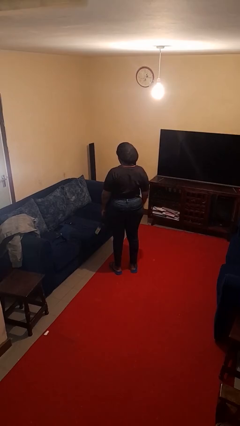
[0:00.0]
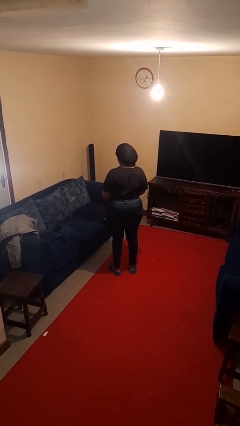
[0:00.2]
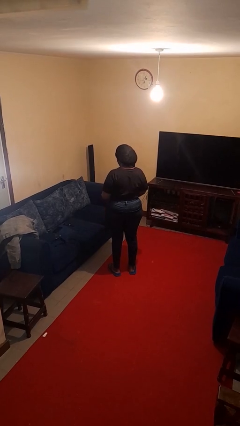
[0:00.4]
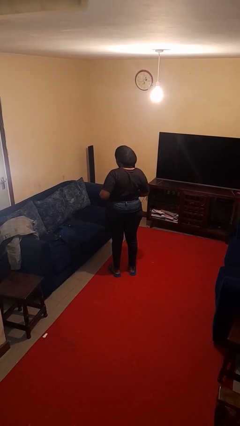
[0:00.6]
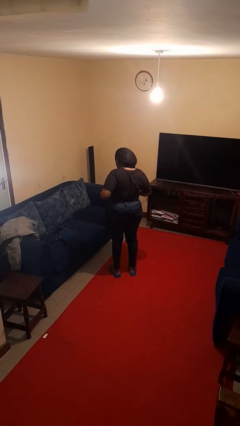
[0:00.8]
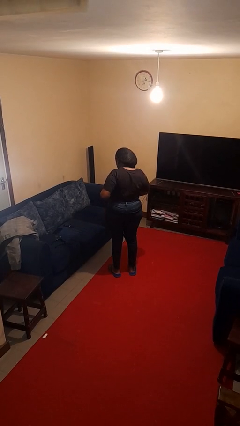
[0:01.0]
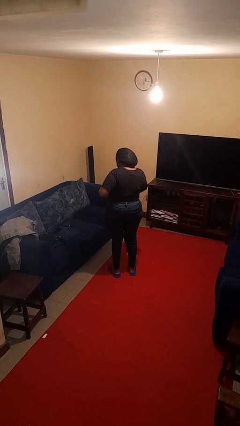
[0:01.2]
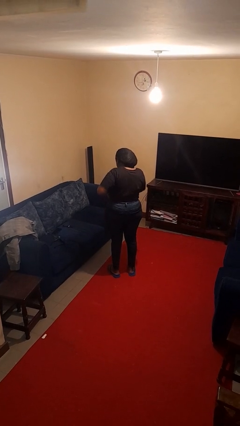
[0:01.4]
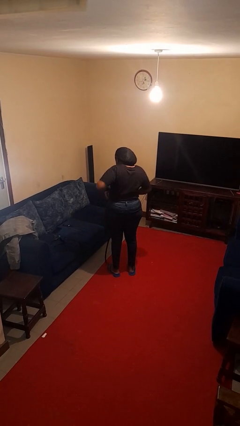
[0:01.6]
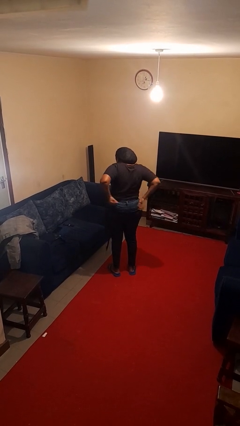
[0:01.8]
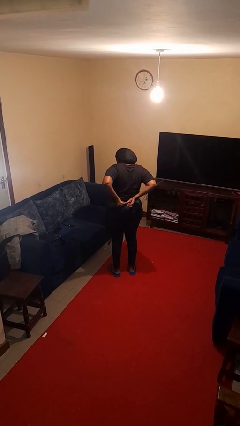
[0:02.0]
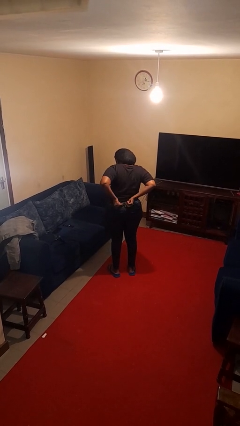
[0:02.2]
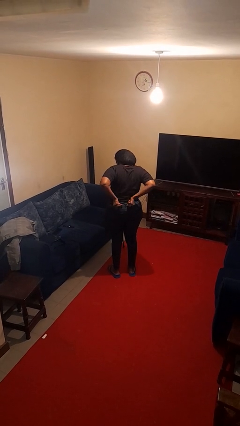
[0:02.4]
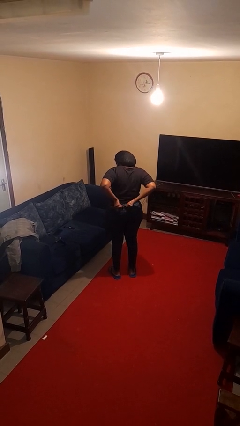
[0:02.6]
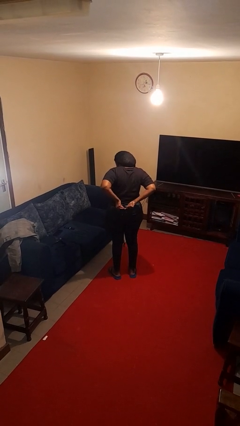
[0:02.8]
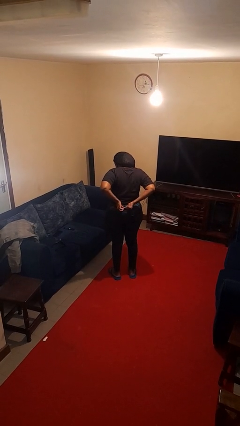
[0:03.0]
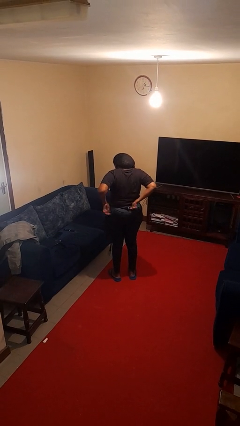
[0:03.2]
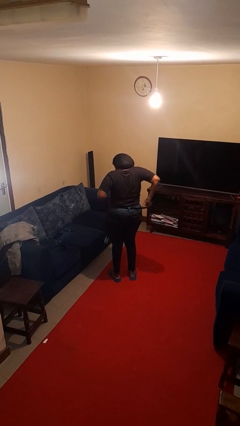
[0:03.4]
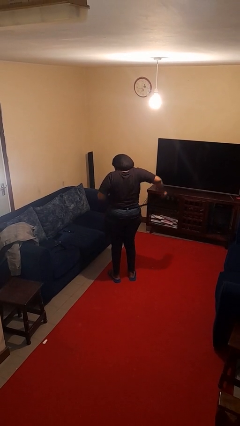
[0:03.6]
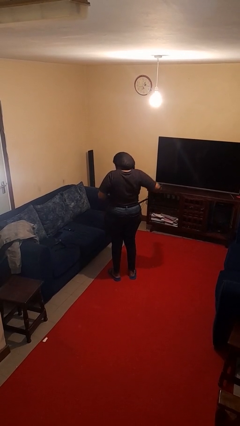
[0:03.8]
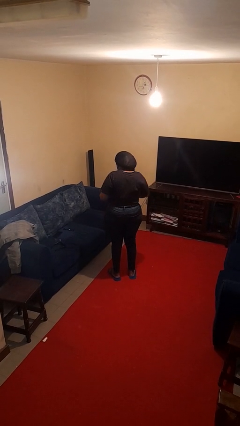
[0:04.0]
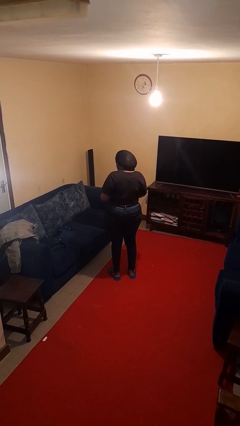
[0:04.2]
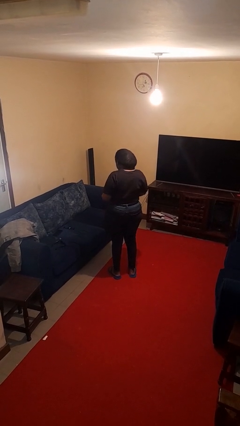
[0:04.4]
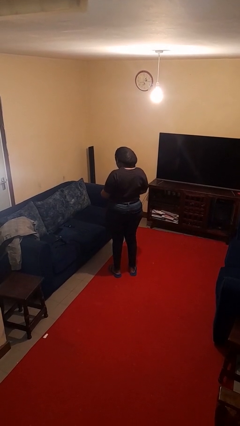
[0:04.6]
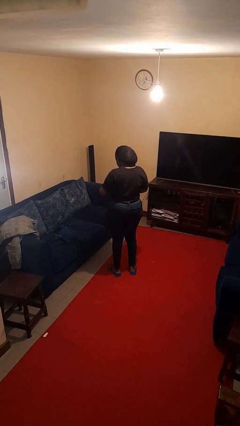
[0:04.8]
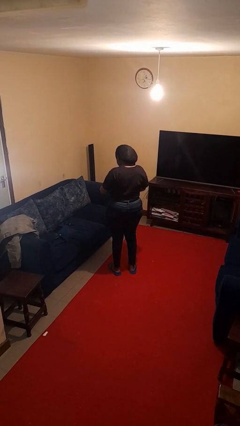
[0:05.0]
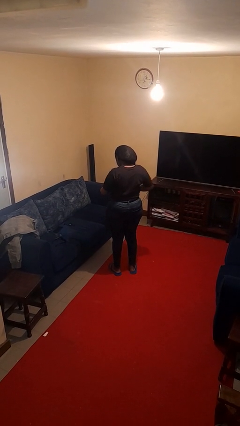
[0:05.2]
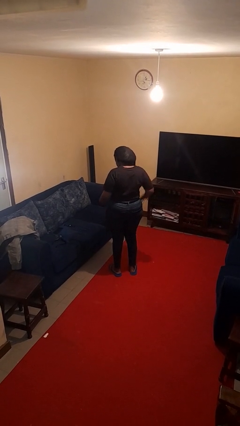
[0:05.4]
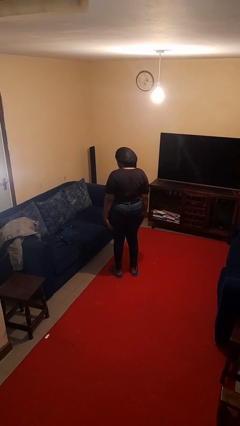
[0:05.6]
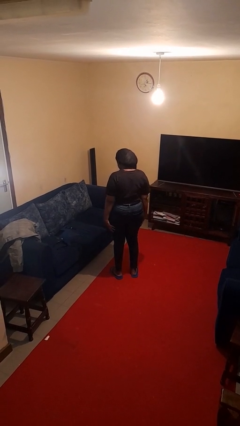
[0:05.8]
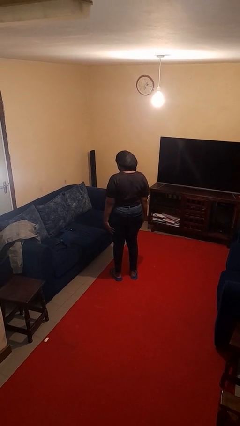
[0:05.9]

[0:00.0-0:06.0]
person puts on belt

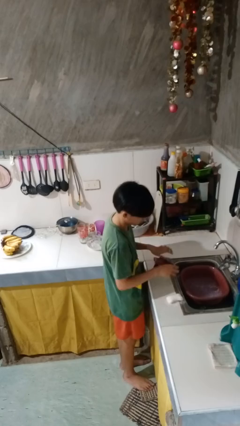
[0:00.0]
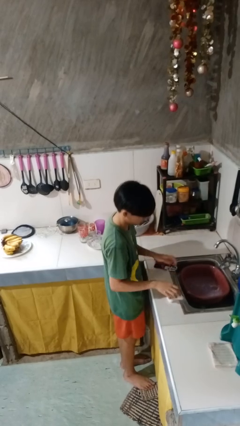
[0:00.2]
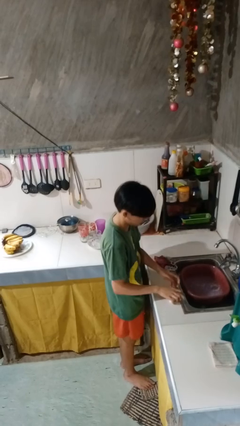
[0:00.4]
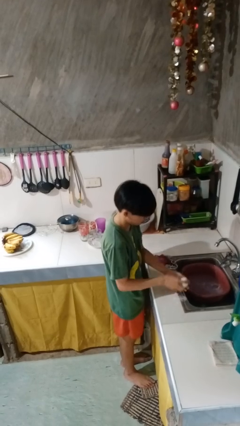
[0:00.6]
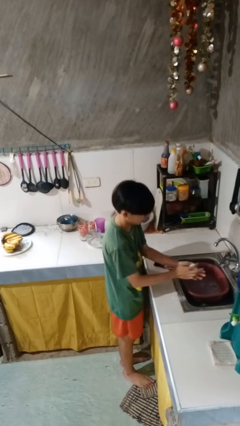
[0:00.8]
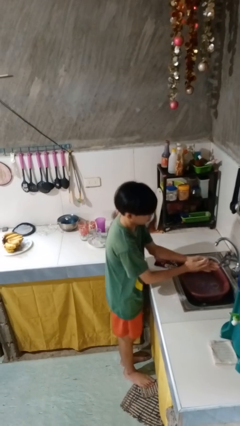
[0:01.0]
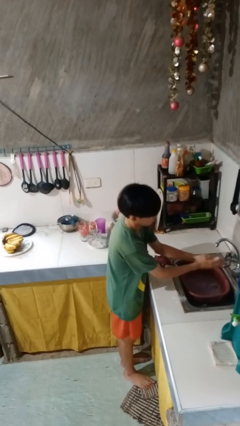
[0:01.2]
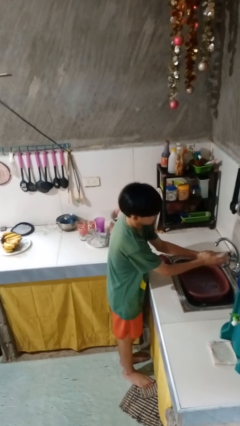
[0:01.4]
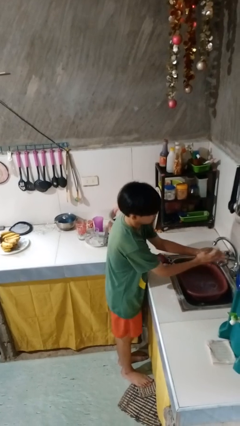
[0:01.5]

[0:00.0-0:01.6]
person washes hands

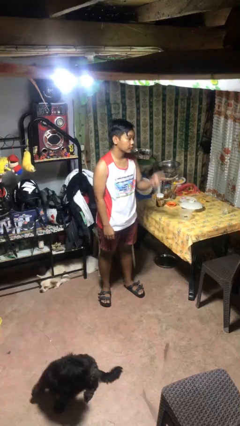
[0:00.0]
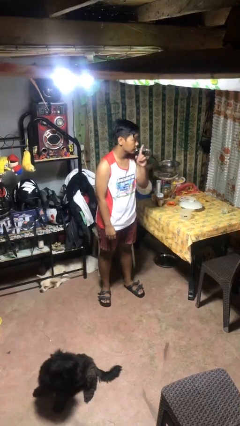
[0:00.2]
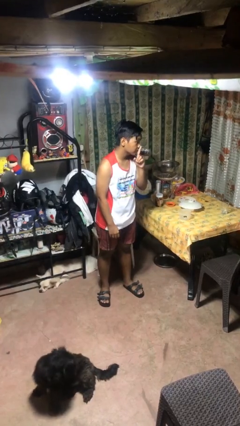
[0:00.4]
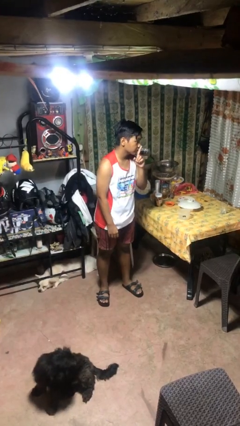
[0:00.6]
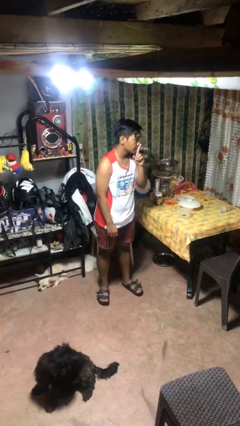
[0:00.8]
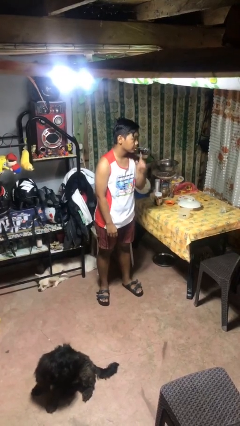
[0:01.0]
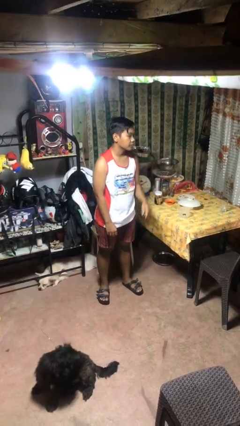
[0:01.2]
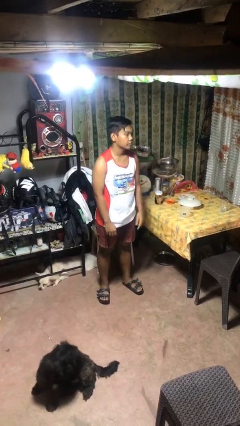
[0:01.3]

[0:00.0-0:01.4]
person gestures be quiet

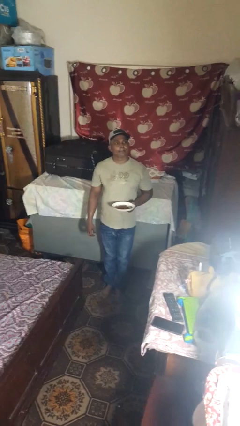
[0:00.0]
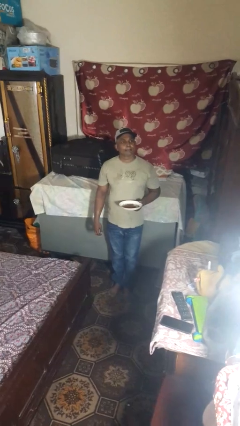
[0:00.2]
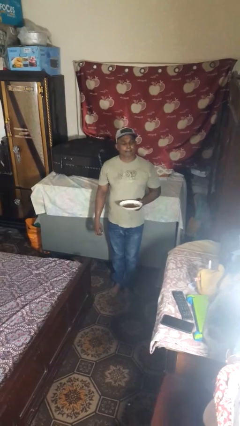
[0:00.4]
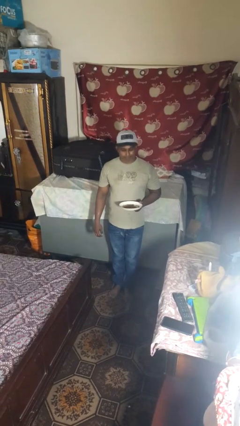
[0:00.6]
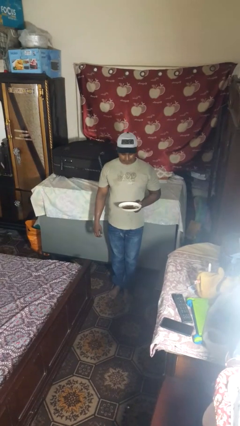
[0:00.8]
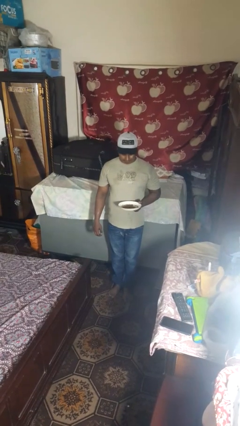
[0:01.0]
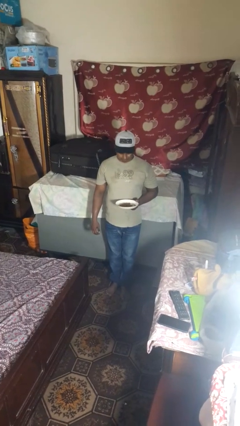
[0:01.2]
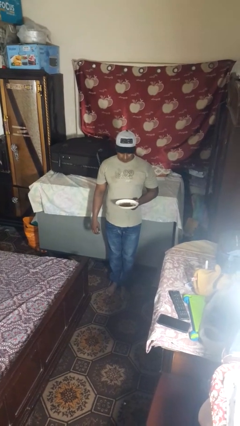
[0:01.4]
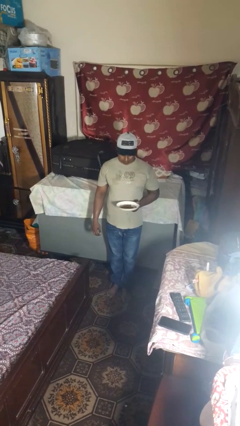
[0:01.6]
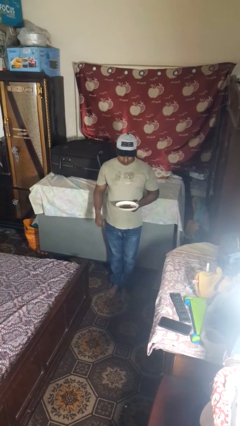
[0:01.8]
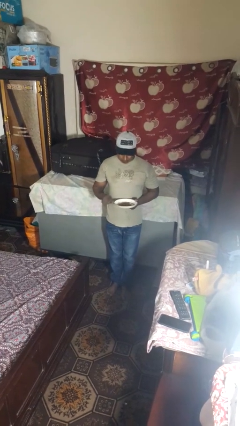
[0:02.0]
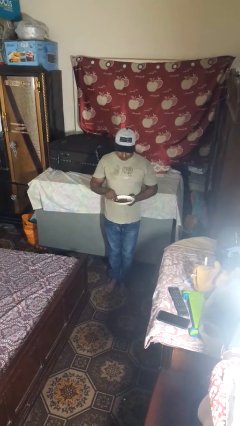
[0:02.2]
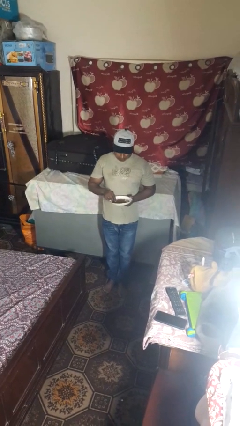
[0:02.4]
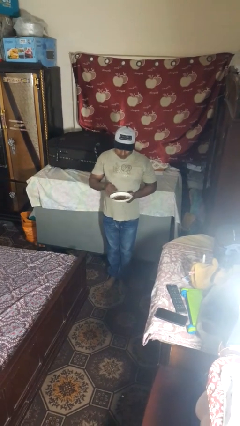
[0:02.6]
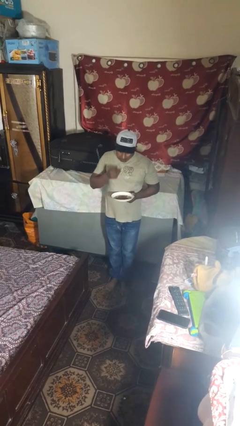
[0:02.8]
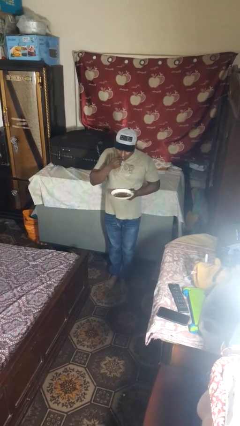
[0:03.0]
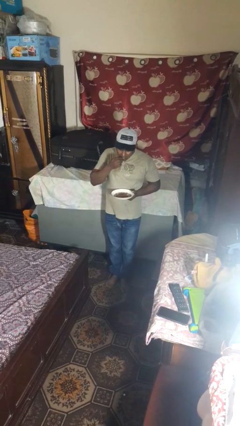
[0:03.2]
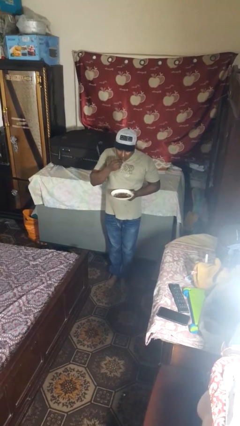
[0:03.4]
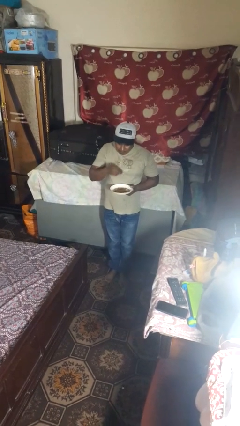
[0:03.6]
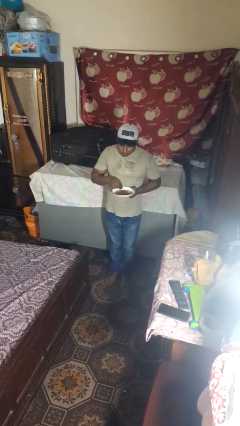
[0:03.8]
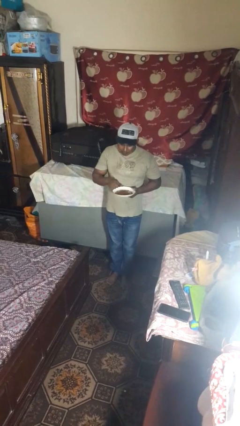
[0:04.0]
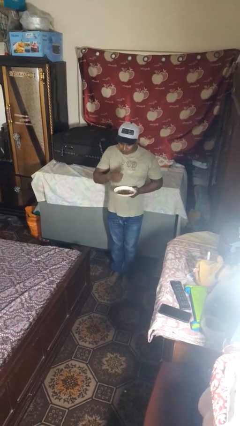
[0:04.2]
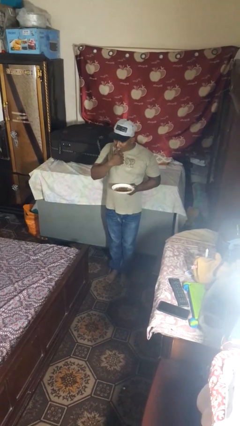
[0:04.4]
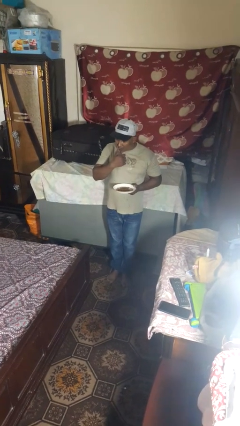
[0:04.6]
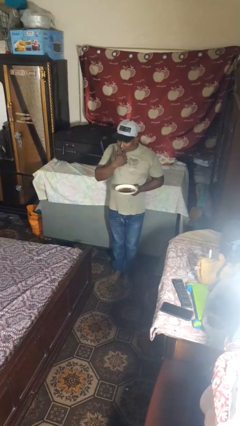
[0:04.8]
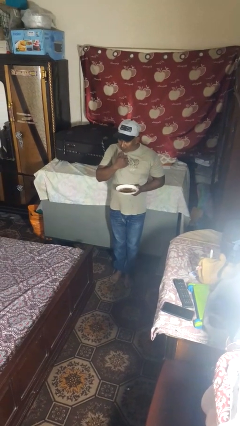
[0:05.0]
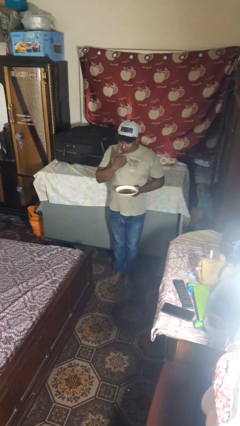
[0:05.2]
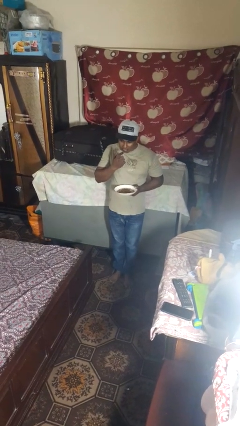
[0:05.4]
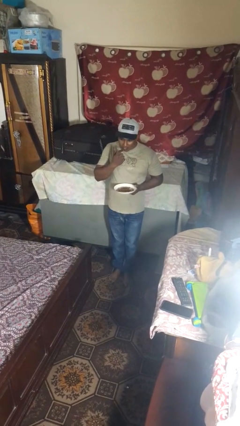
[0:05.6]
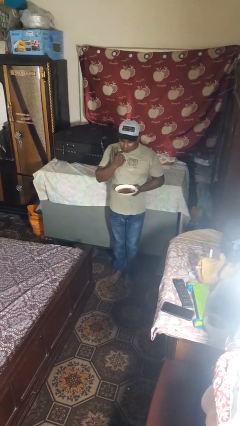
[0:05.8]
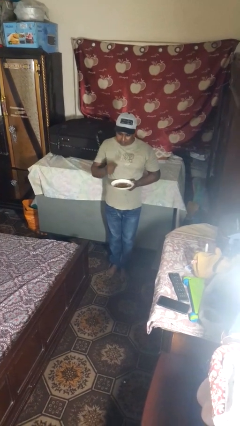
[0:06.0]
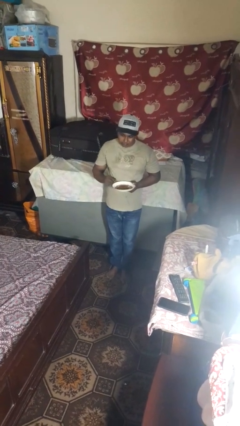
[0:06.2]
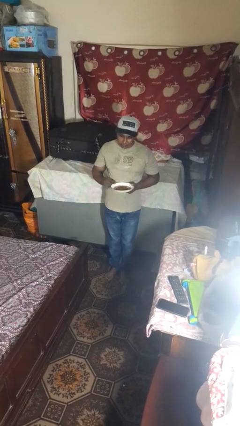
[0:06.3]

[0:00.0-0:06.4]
person licks fingers

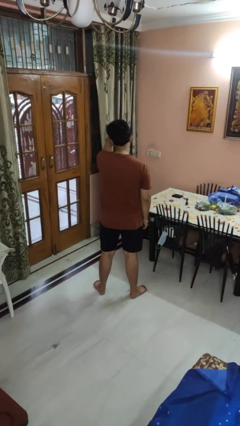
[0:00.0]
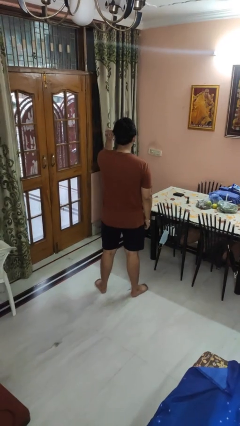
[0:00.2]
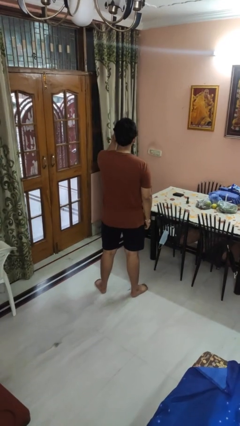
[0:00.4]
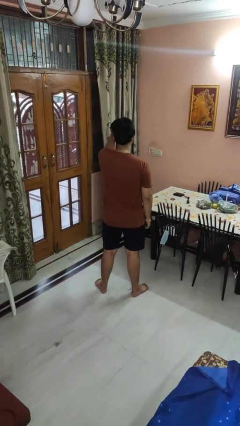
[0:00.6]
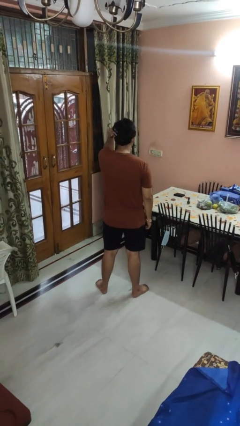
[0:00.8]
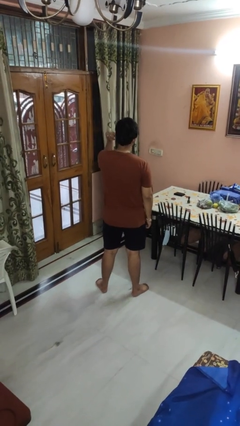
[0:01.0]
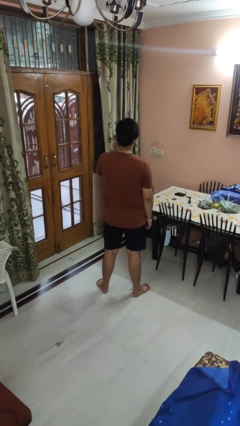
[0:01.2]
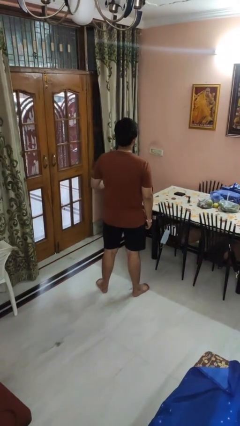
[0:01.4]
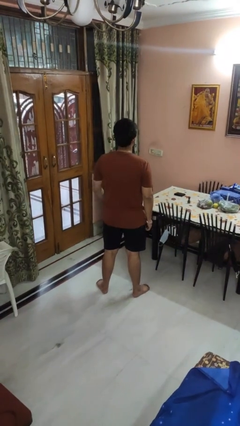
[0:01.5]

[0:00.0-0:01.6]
person strokes hair

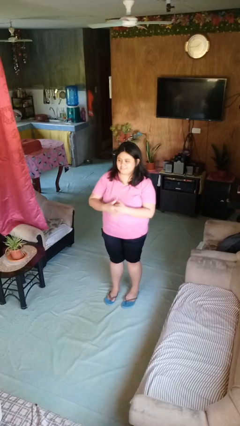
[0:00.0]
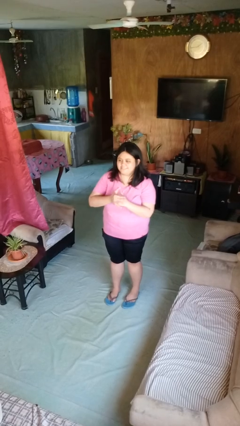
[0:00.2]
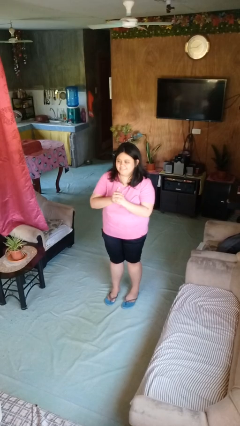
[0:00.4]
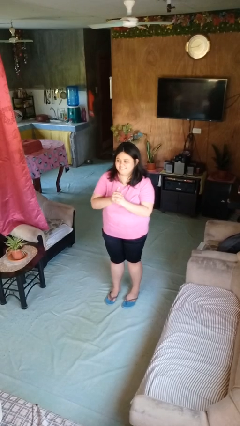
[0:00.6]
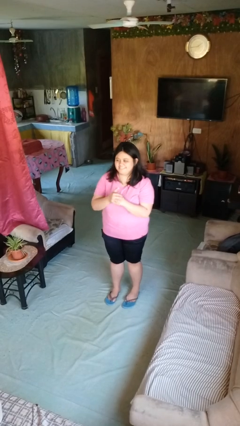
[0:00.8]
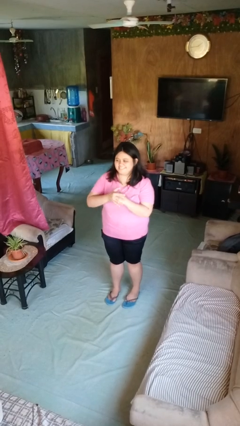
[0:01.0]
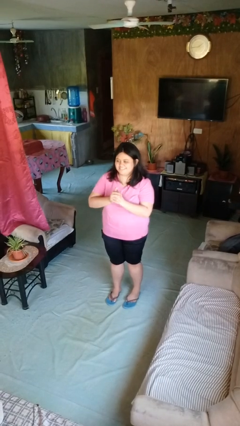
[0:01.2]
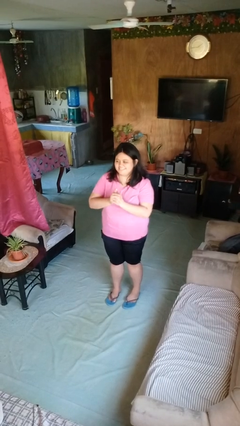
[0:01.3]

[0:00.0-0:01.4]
person cracks knuckles
